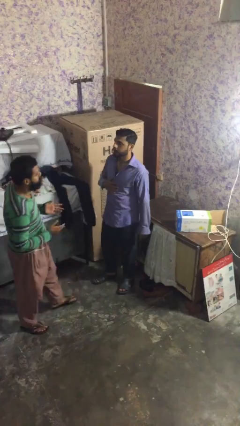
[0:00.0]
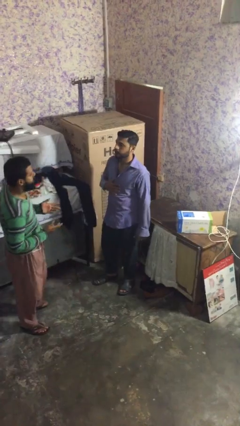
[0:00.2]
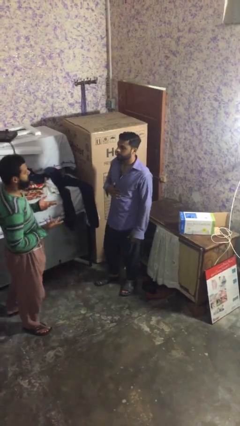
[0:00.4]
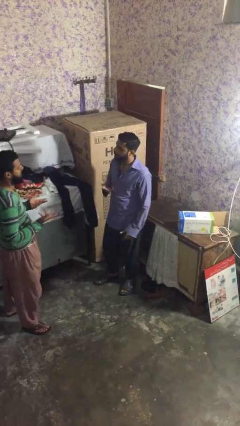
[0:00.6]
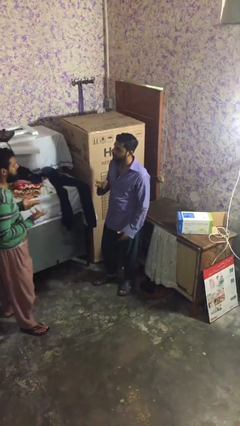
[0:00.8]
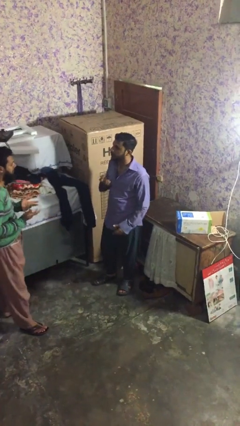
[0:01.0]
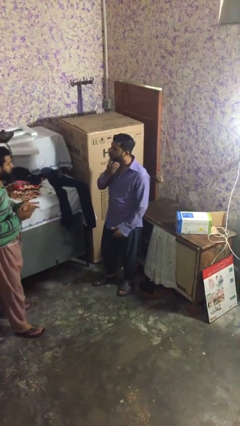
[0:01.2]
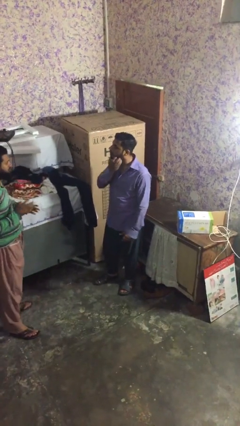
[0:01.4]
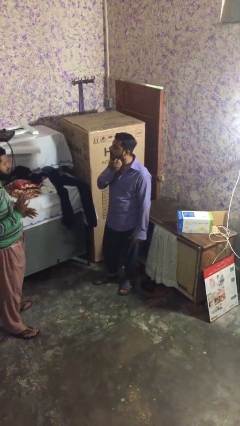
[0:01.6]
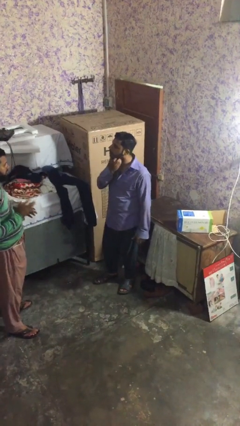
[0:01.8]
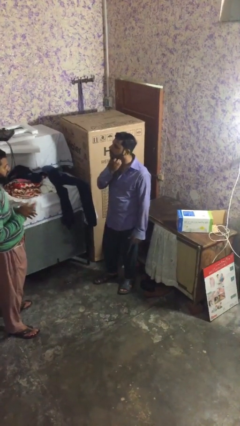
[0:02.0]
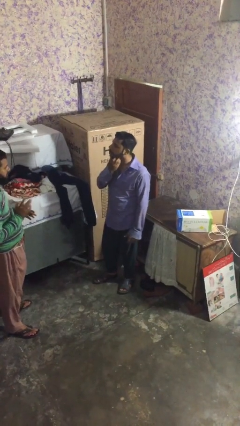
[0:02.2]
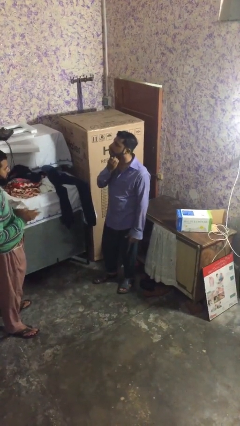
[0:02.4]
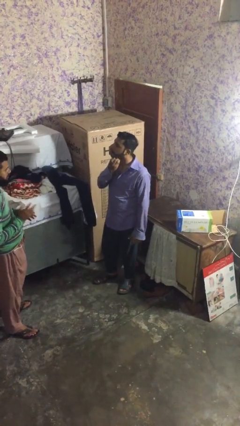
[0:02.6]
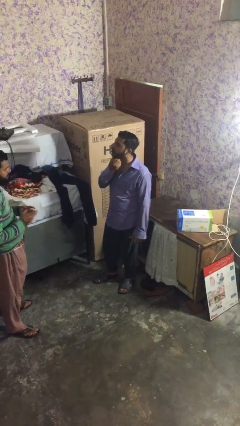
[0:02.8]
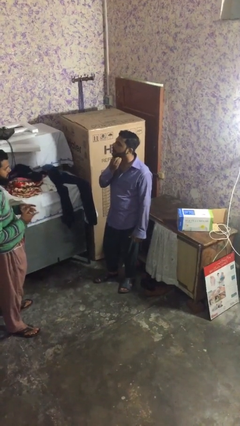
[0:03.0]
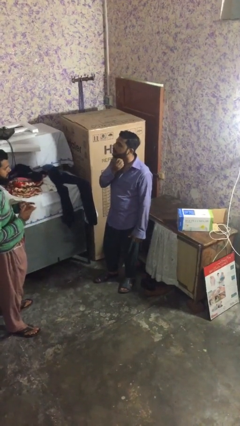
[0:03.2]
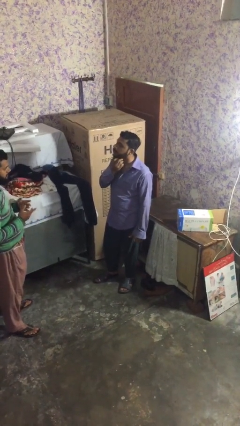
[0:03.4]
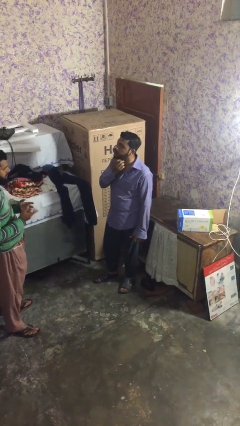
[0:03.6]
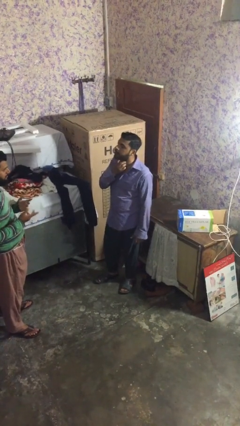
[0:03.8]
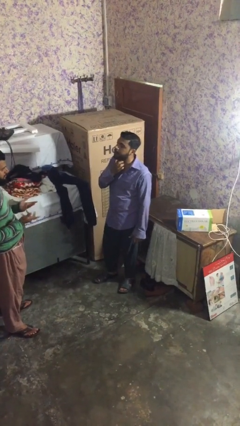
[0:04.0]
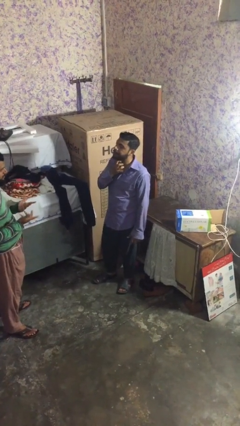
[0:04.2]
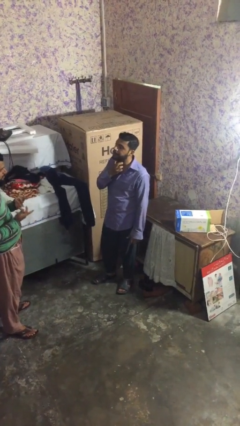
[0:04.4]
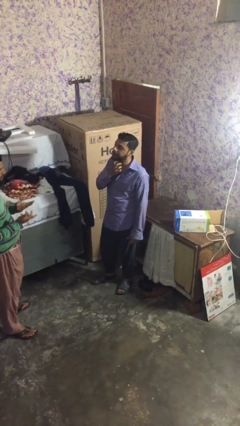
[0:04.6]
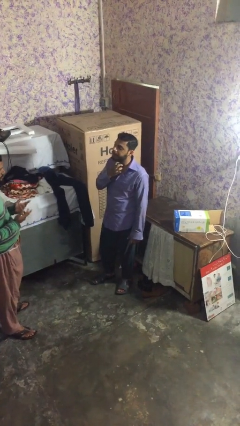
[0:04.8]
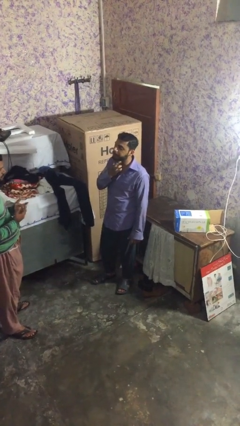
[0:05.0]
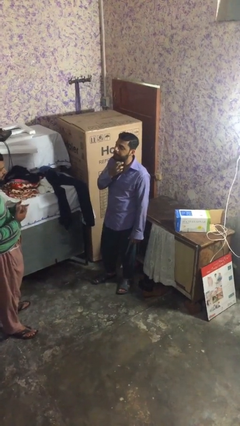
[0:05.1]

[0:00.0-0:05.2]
person talks to person

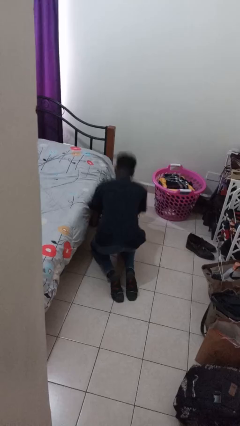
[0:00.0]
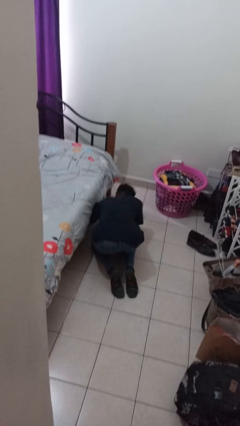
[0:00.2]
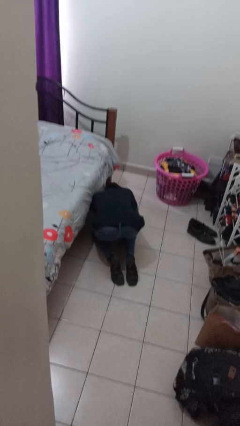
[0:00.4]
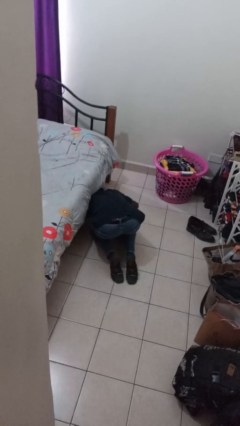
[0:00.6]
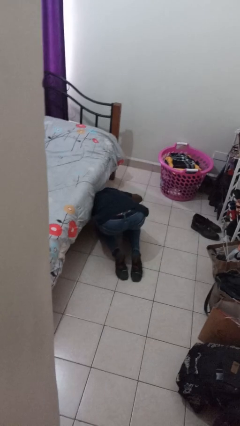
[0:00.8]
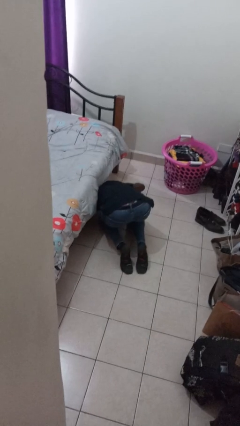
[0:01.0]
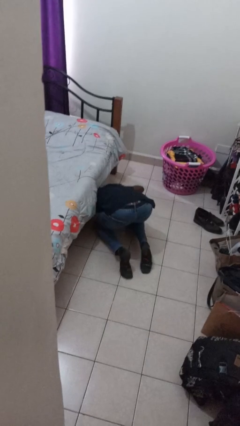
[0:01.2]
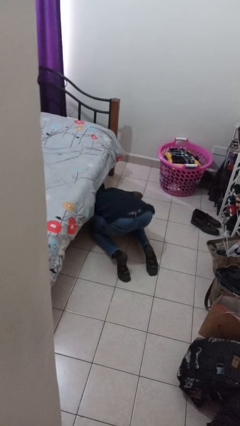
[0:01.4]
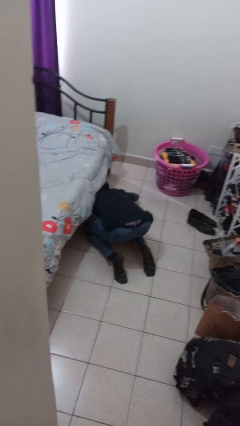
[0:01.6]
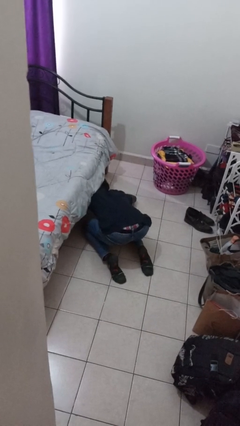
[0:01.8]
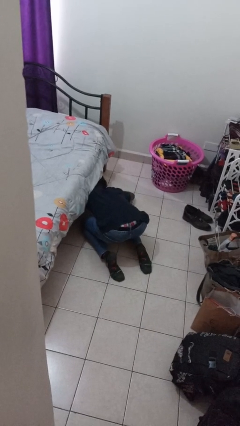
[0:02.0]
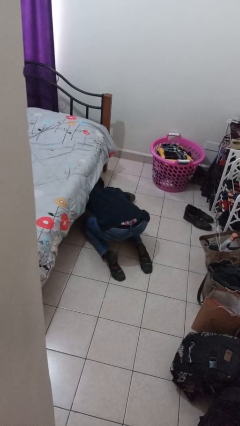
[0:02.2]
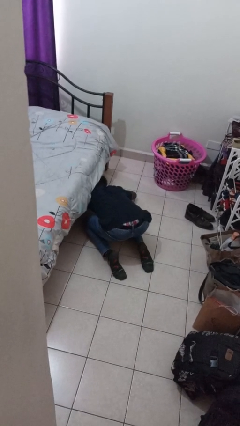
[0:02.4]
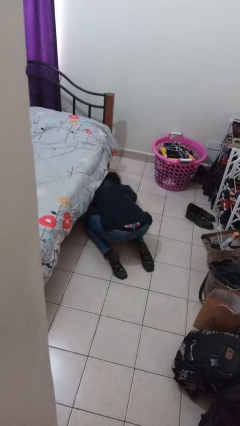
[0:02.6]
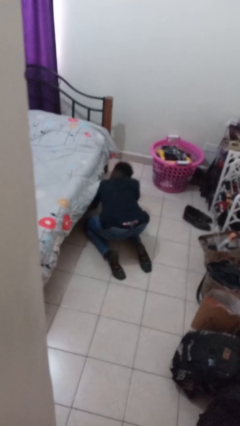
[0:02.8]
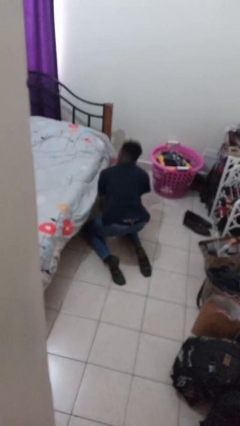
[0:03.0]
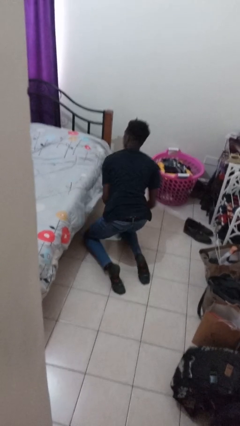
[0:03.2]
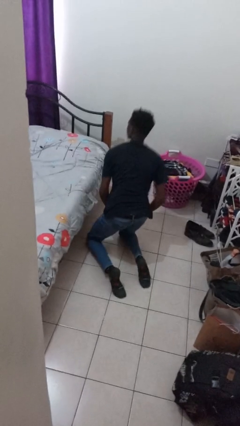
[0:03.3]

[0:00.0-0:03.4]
person searches under bed

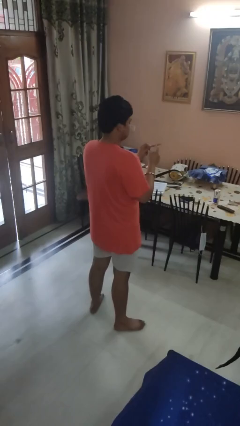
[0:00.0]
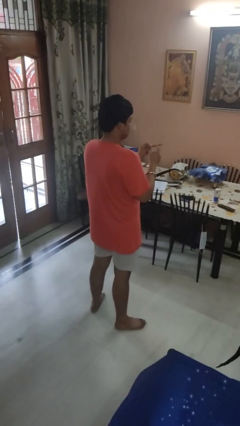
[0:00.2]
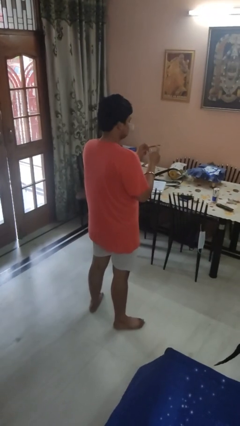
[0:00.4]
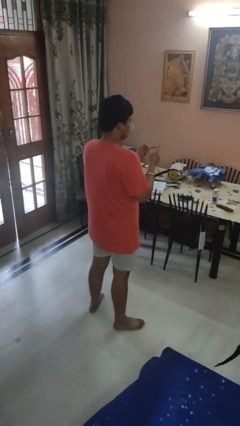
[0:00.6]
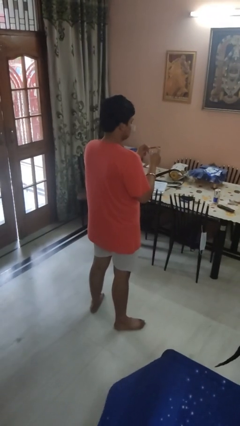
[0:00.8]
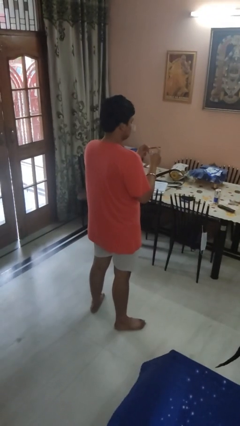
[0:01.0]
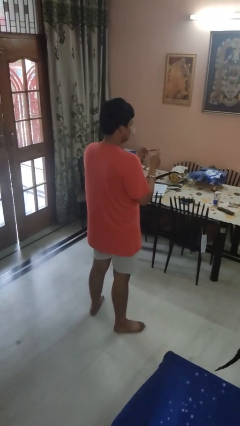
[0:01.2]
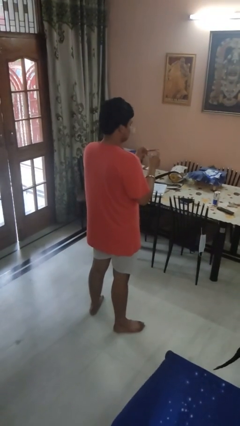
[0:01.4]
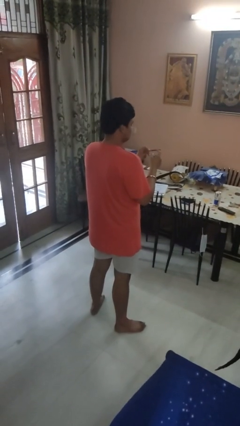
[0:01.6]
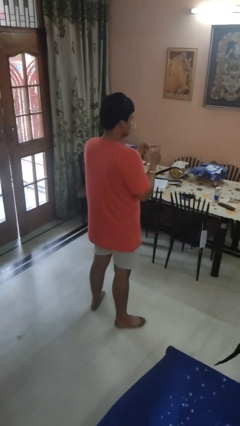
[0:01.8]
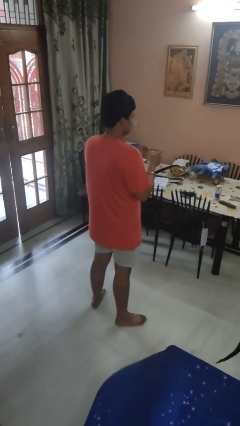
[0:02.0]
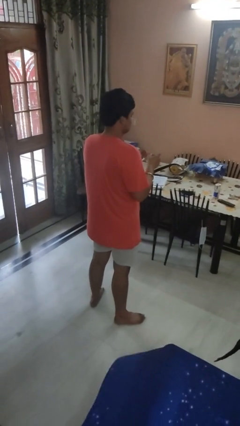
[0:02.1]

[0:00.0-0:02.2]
person files fingernails

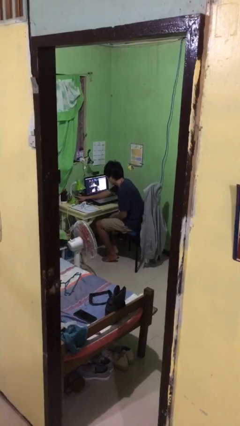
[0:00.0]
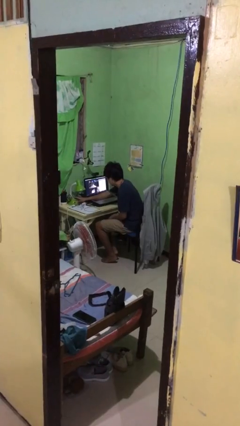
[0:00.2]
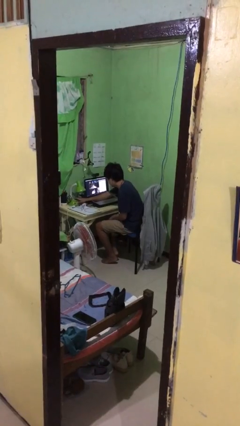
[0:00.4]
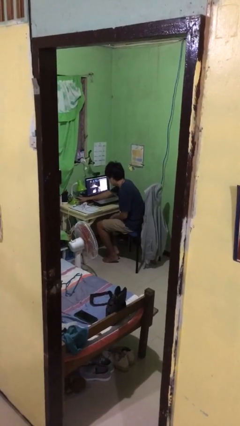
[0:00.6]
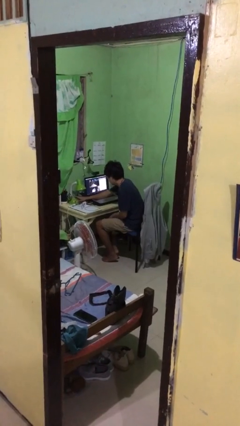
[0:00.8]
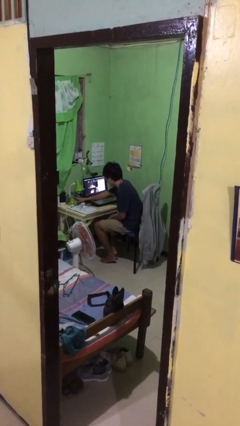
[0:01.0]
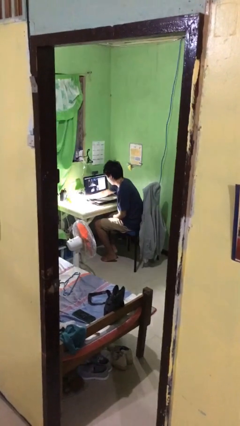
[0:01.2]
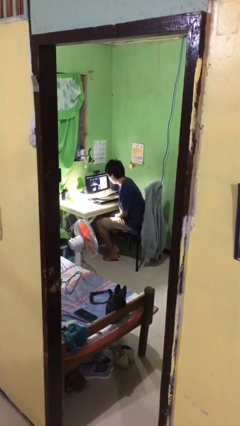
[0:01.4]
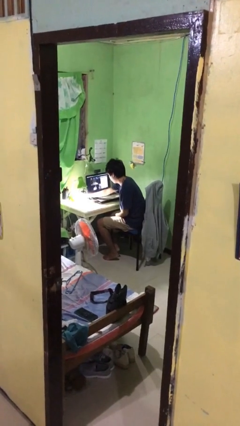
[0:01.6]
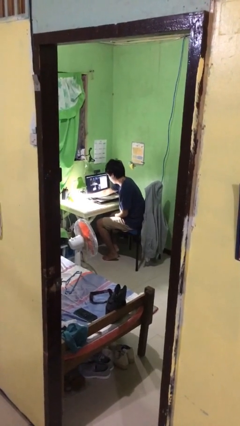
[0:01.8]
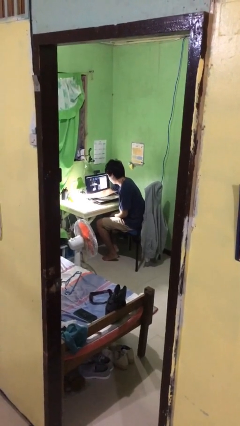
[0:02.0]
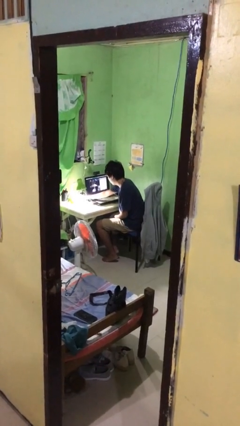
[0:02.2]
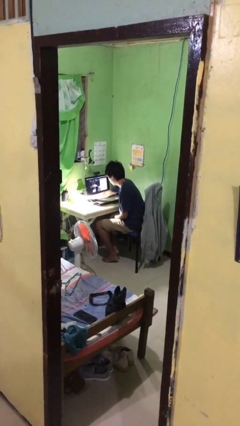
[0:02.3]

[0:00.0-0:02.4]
person turns on lamp

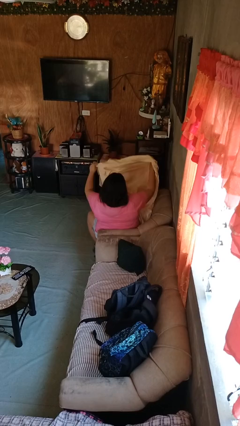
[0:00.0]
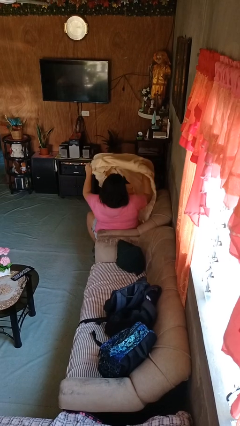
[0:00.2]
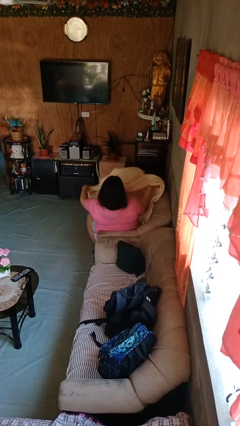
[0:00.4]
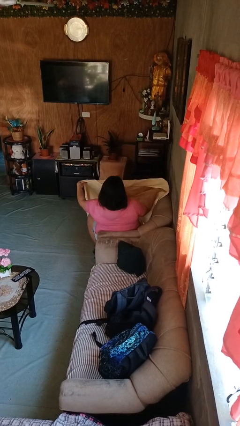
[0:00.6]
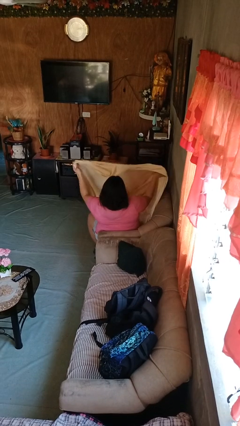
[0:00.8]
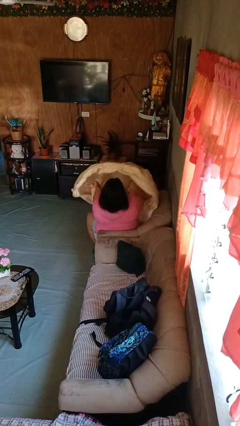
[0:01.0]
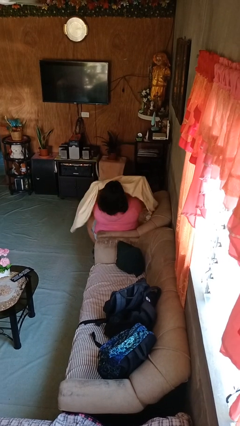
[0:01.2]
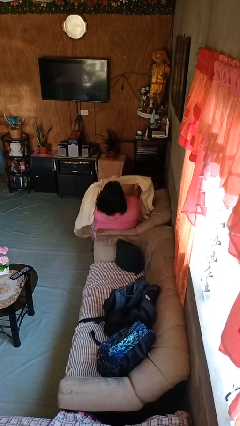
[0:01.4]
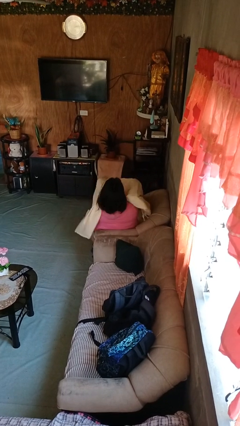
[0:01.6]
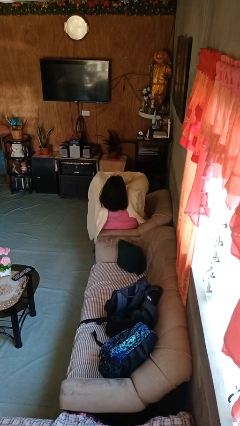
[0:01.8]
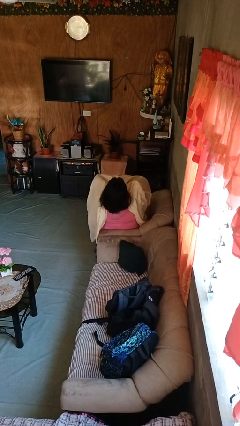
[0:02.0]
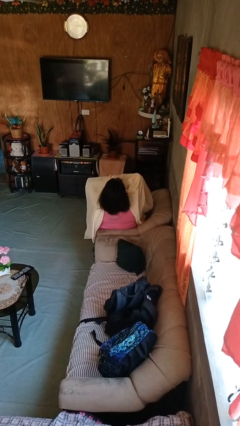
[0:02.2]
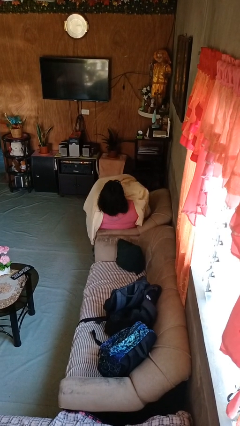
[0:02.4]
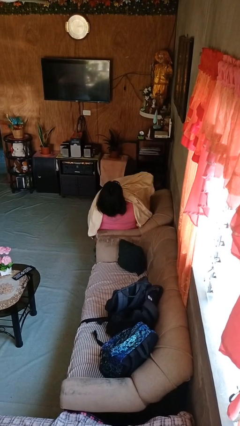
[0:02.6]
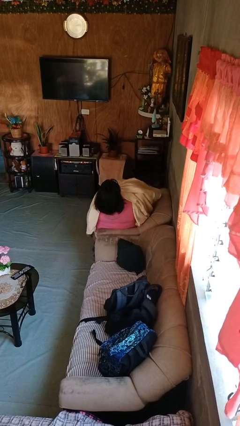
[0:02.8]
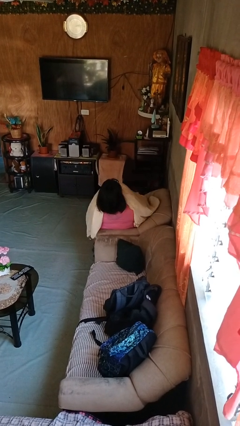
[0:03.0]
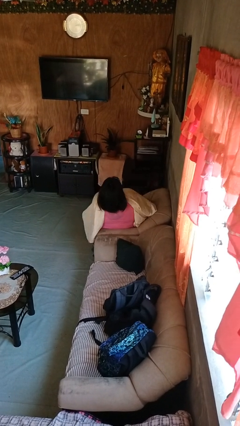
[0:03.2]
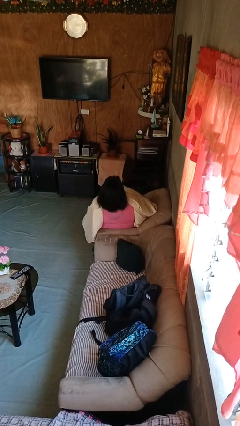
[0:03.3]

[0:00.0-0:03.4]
person covers with blanket

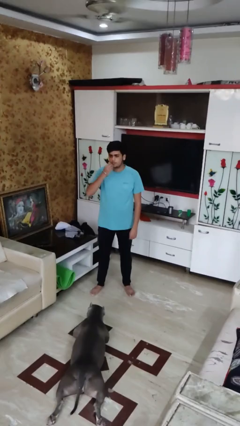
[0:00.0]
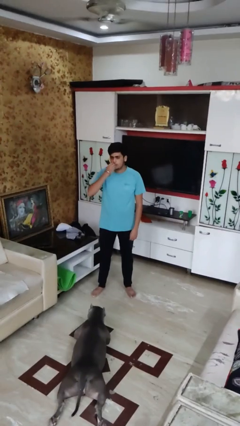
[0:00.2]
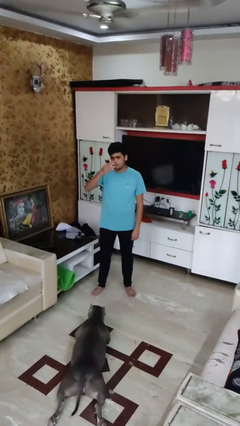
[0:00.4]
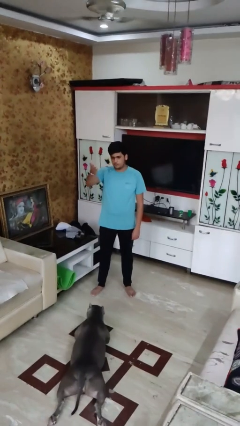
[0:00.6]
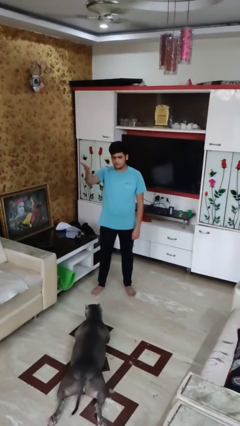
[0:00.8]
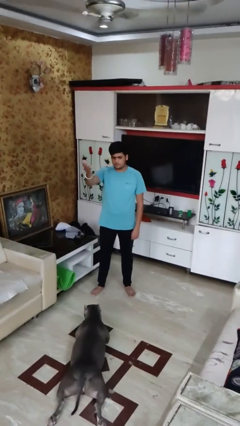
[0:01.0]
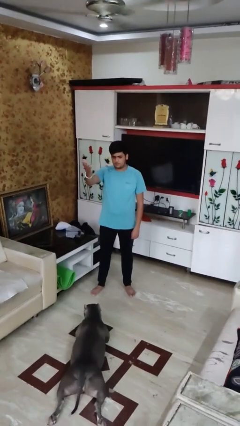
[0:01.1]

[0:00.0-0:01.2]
person gestures blow kiss
